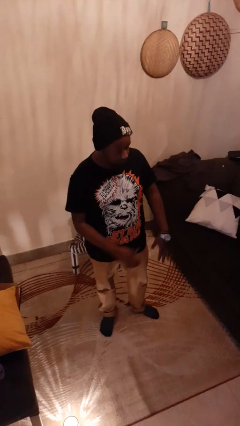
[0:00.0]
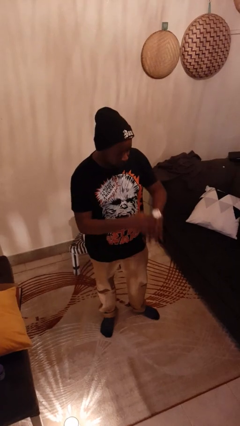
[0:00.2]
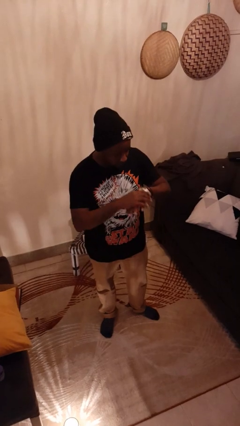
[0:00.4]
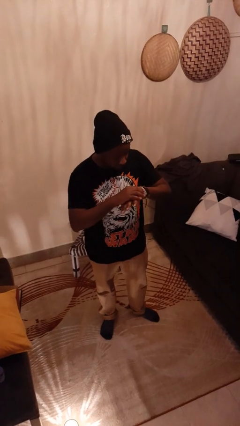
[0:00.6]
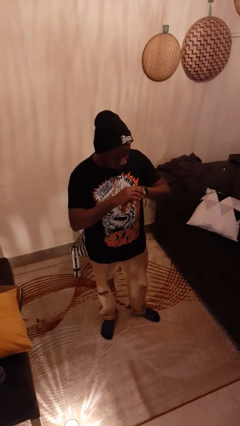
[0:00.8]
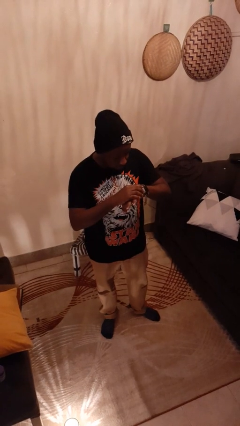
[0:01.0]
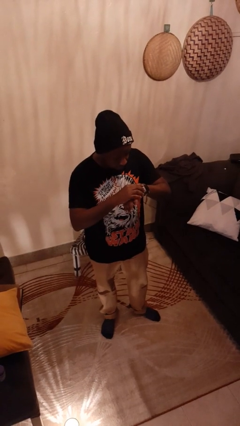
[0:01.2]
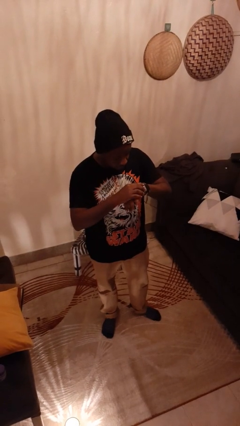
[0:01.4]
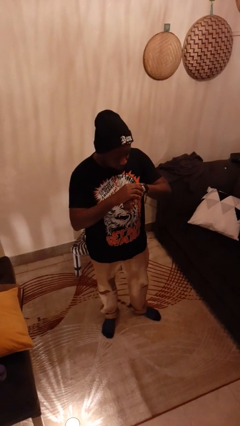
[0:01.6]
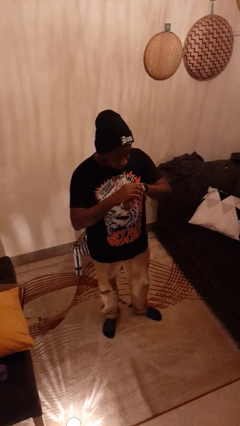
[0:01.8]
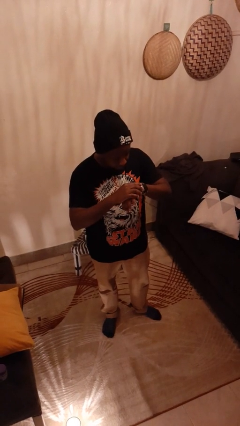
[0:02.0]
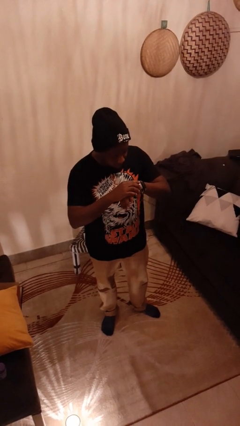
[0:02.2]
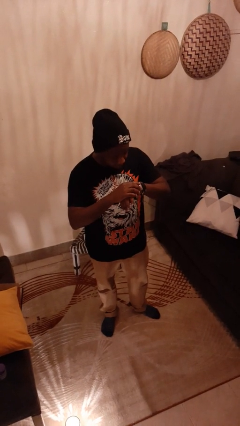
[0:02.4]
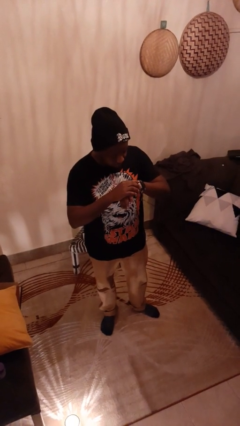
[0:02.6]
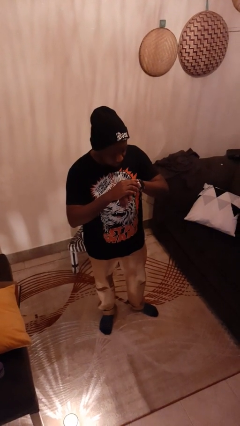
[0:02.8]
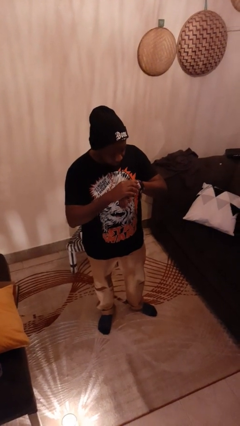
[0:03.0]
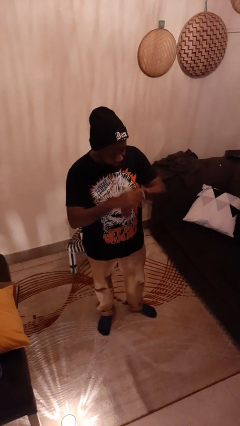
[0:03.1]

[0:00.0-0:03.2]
person looks at wristwatch

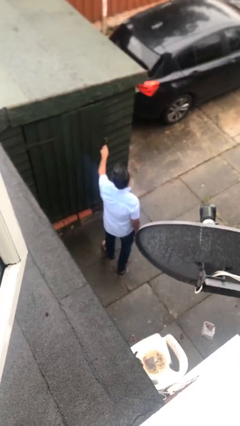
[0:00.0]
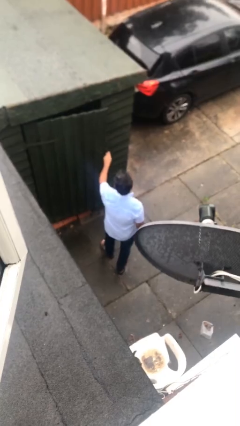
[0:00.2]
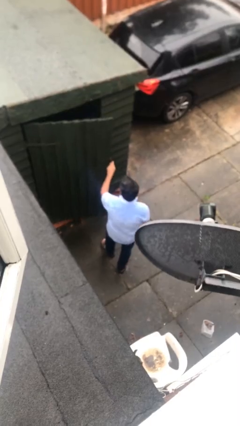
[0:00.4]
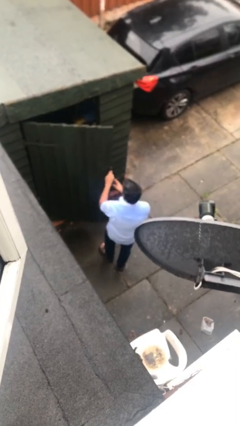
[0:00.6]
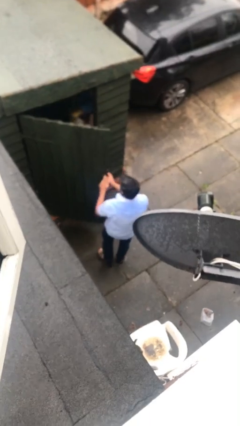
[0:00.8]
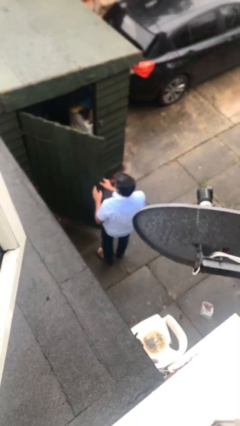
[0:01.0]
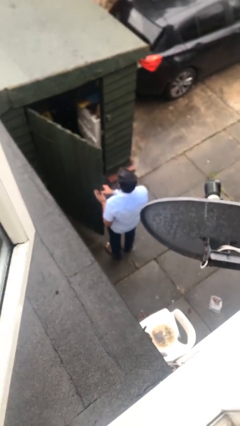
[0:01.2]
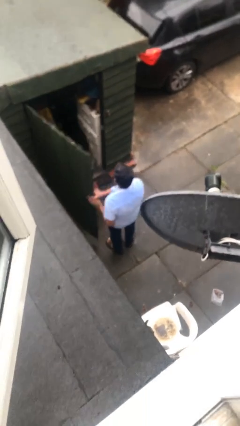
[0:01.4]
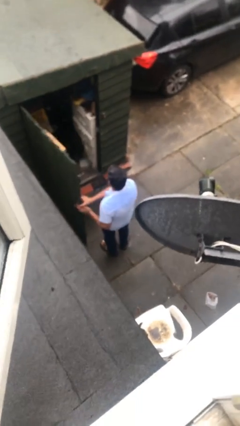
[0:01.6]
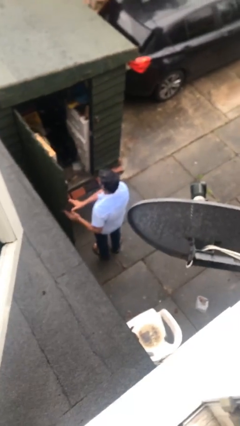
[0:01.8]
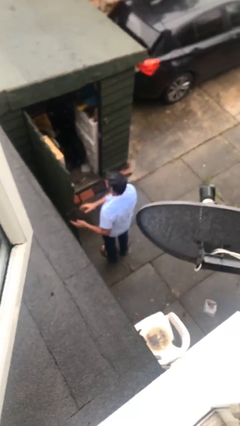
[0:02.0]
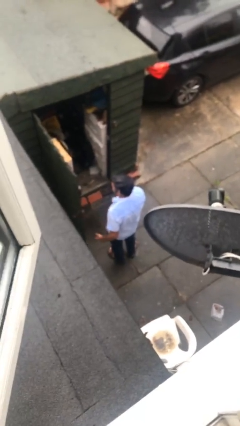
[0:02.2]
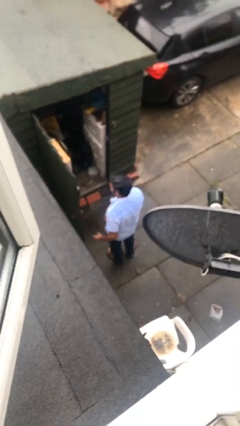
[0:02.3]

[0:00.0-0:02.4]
person opens facility door

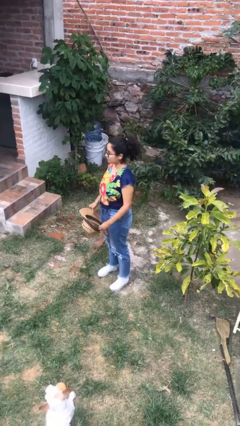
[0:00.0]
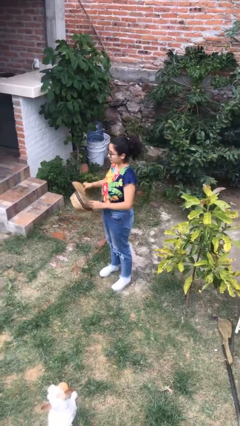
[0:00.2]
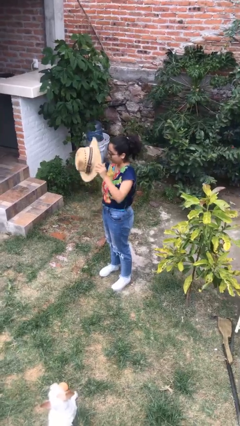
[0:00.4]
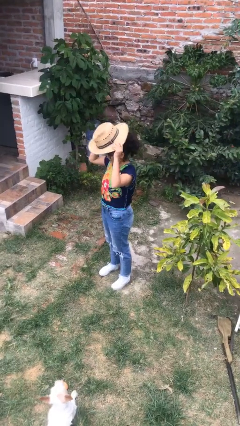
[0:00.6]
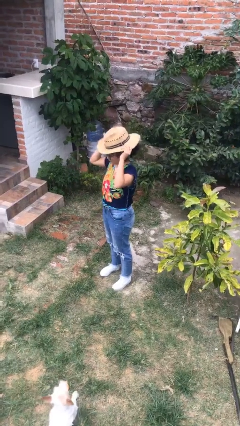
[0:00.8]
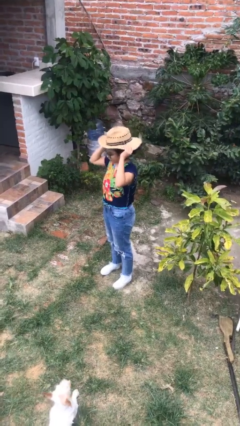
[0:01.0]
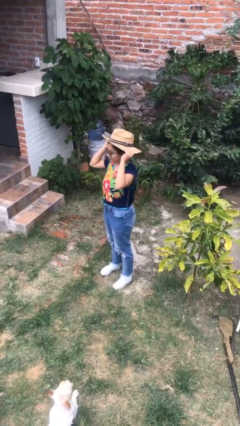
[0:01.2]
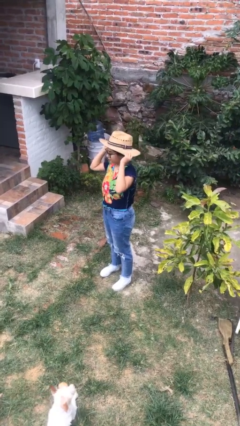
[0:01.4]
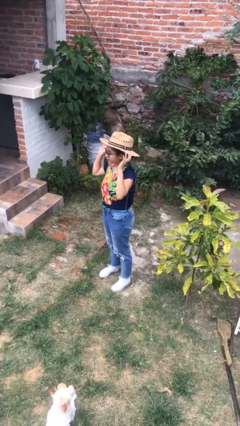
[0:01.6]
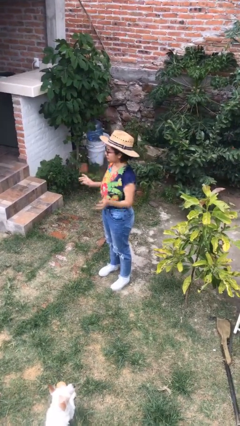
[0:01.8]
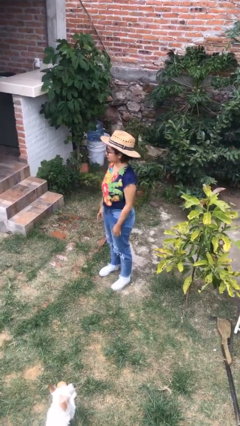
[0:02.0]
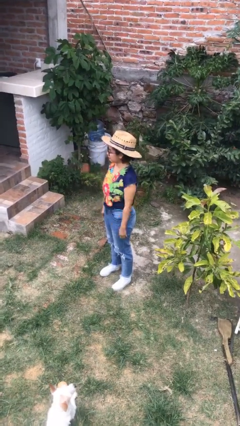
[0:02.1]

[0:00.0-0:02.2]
person puts on hat

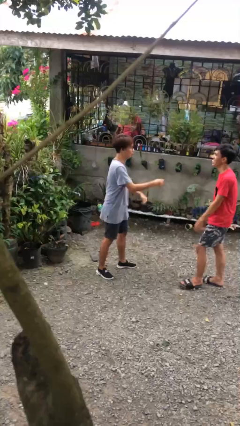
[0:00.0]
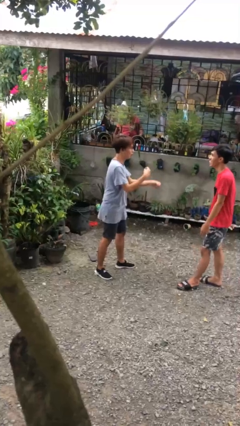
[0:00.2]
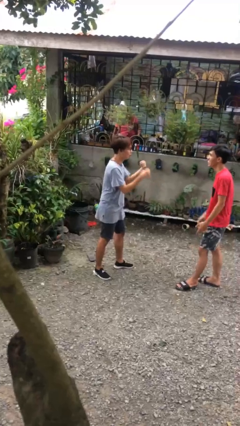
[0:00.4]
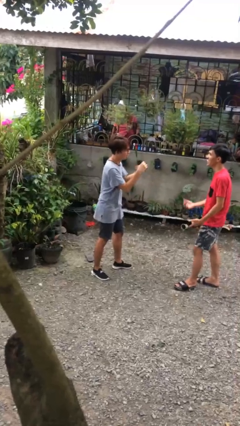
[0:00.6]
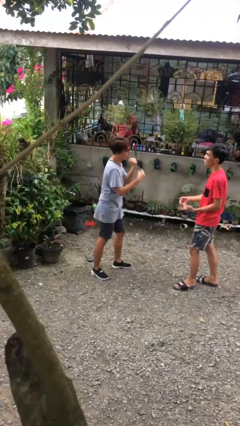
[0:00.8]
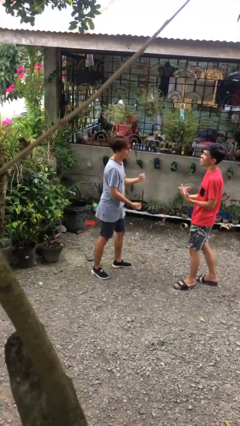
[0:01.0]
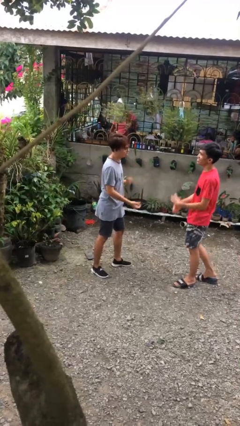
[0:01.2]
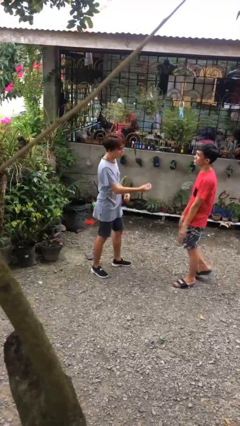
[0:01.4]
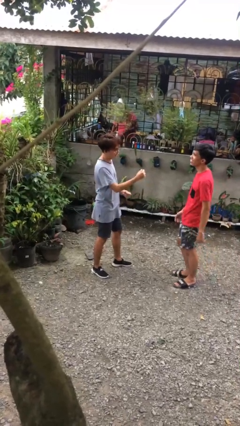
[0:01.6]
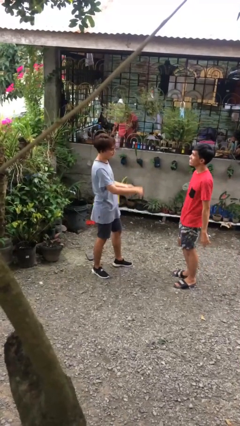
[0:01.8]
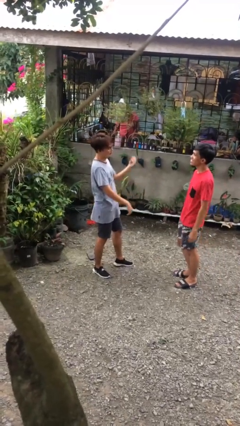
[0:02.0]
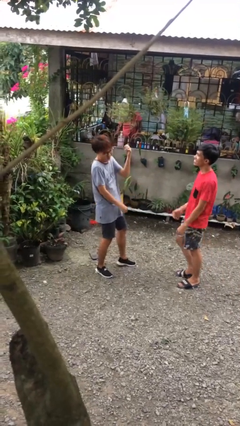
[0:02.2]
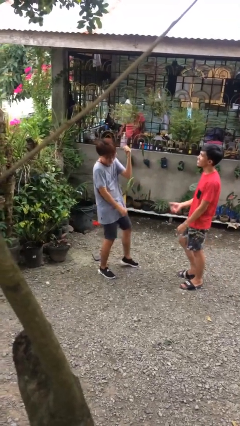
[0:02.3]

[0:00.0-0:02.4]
person talks to person

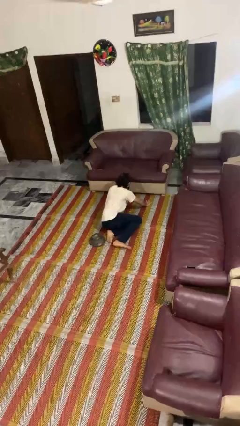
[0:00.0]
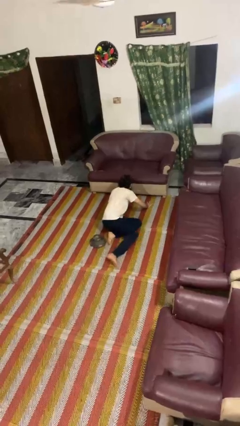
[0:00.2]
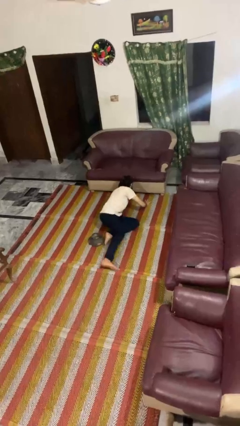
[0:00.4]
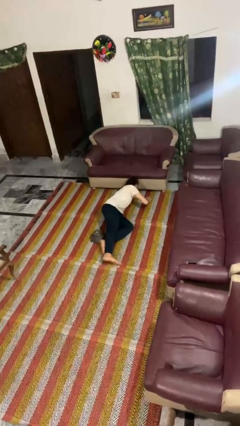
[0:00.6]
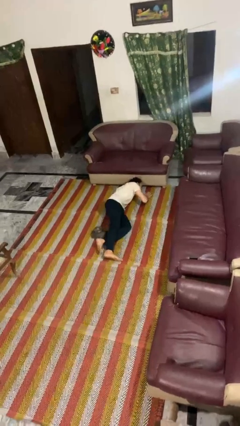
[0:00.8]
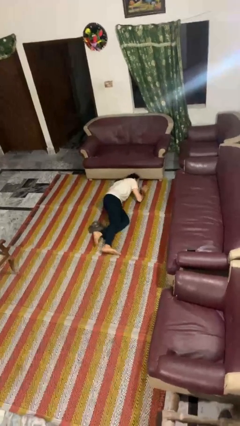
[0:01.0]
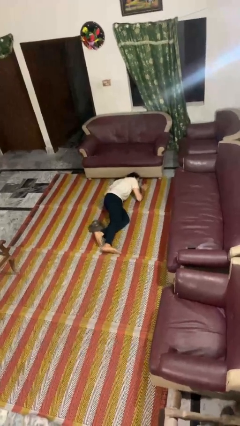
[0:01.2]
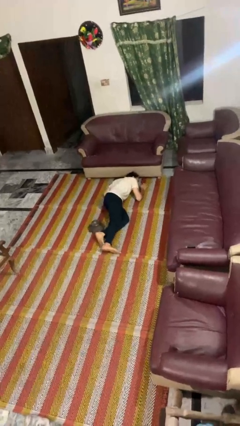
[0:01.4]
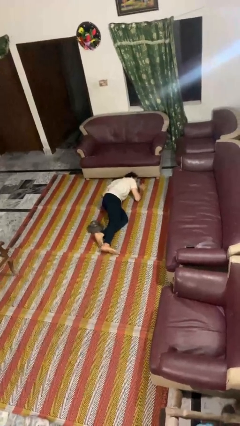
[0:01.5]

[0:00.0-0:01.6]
person lies down on floor

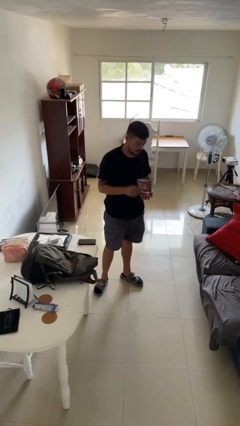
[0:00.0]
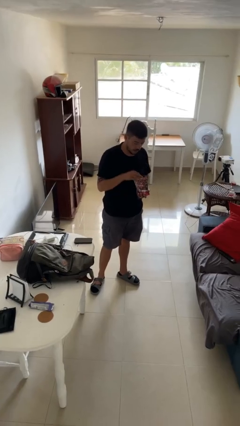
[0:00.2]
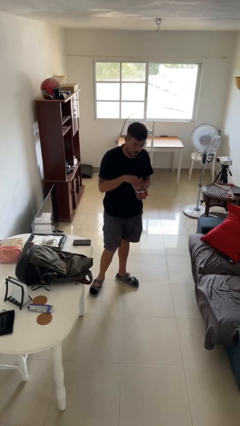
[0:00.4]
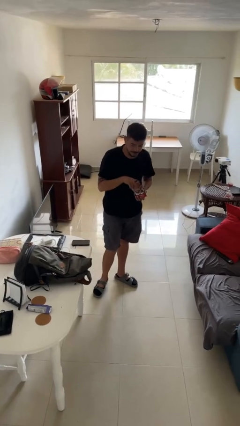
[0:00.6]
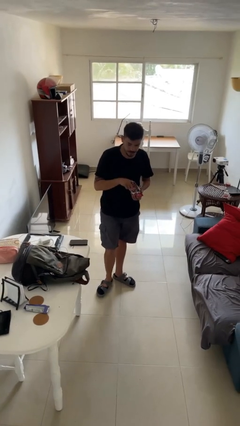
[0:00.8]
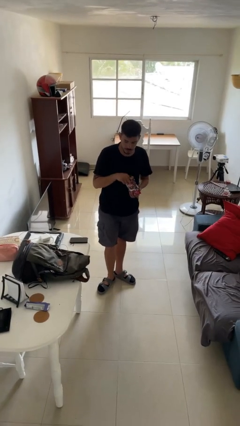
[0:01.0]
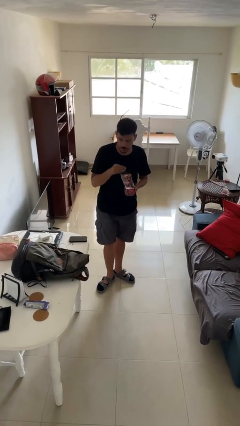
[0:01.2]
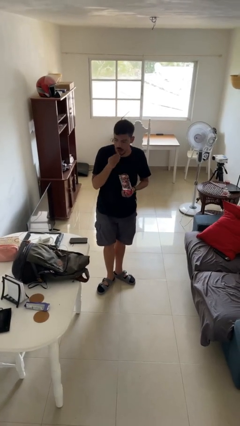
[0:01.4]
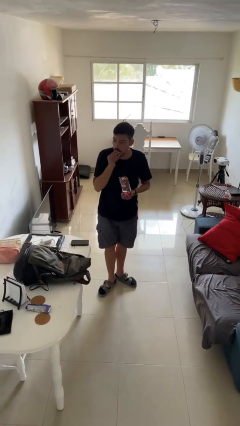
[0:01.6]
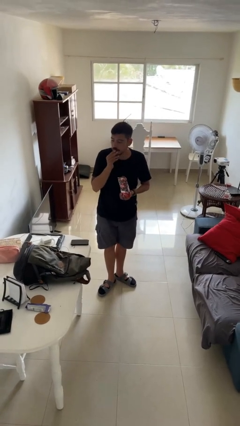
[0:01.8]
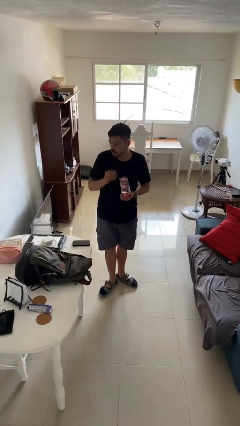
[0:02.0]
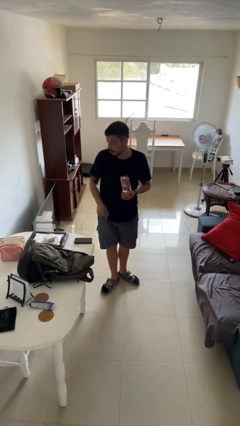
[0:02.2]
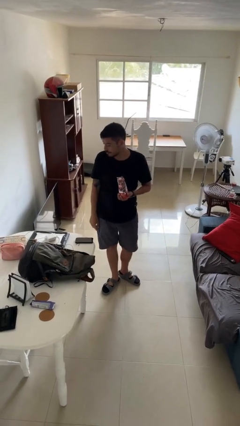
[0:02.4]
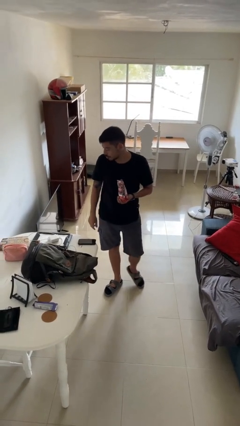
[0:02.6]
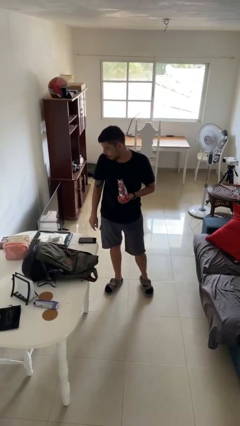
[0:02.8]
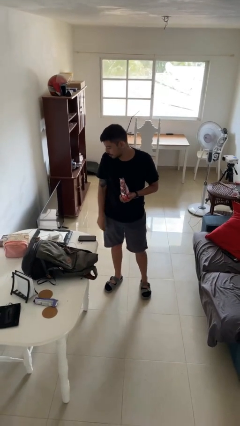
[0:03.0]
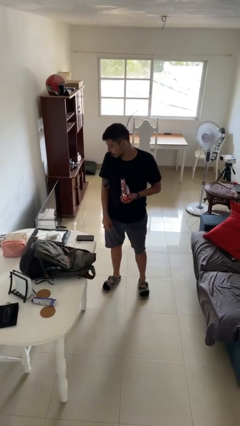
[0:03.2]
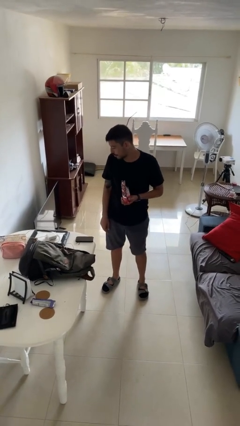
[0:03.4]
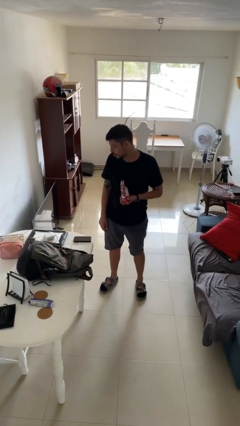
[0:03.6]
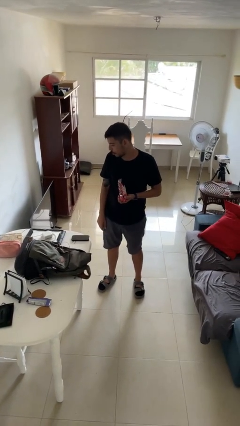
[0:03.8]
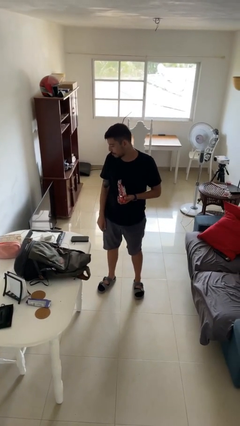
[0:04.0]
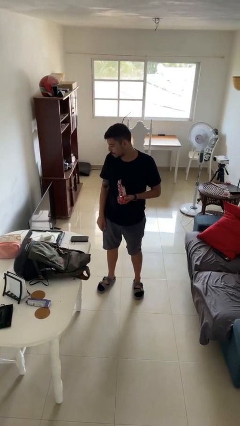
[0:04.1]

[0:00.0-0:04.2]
person eats snack from bag

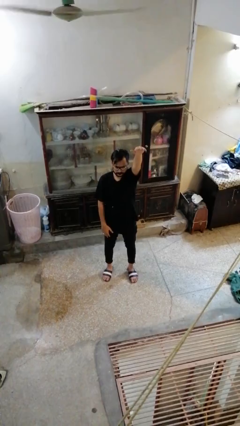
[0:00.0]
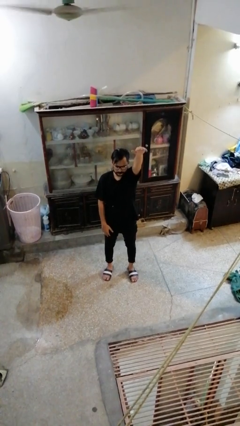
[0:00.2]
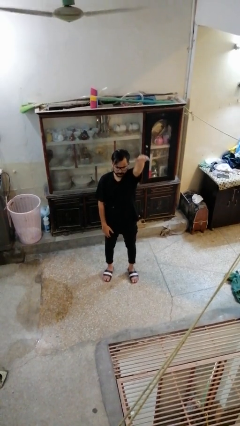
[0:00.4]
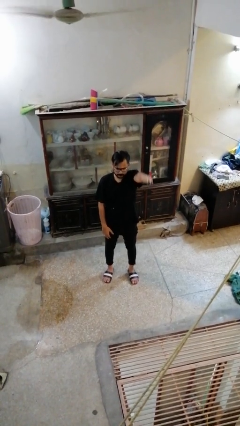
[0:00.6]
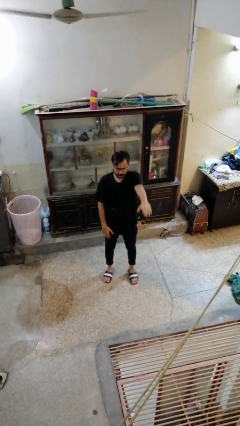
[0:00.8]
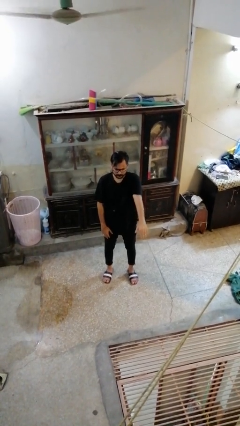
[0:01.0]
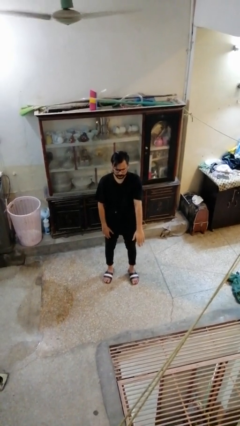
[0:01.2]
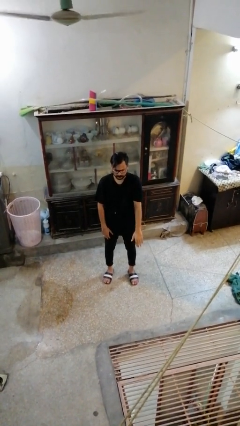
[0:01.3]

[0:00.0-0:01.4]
person gestures swipe down
